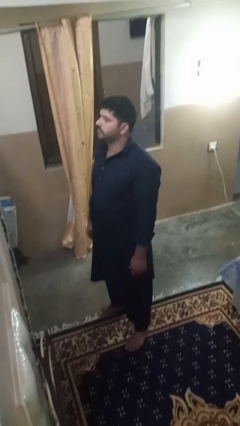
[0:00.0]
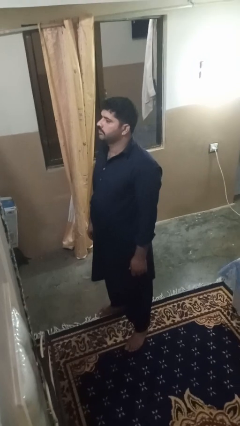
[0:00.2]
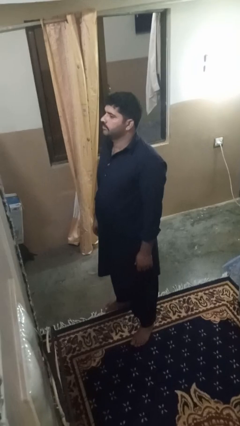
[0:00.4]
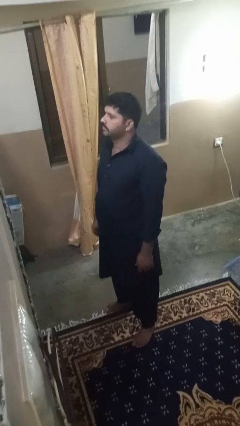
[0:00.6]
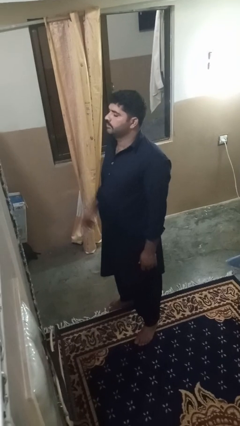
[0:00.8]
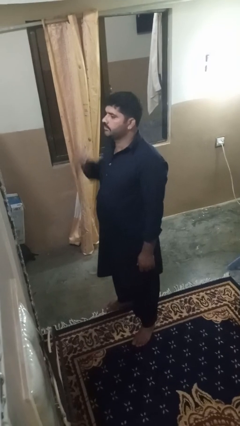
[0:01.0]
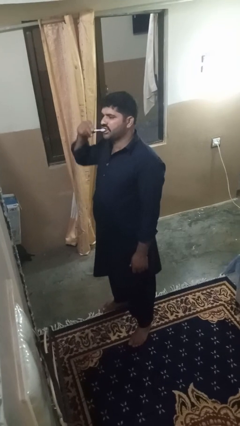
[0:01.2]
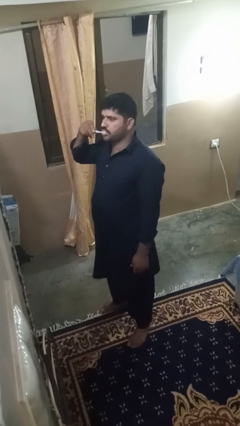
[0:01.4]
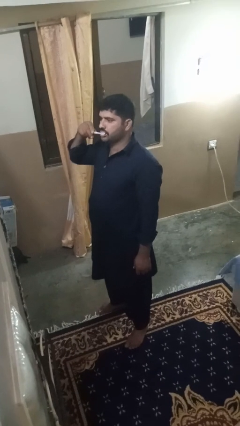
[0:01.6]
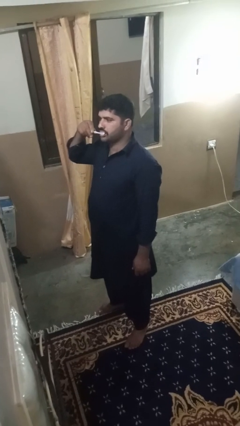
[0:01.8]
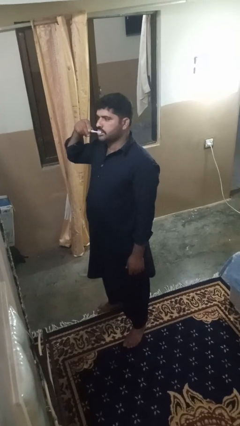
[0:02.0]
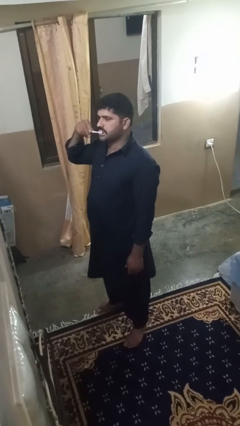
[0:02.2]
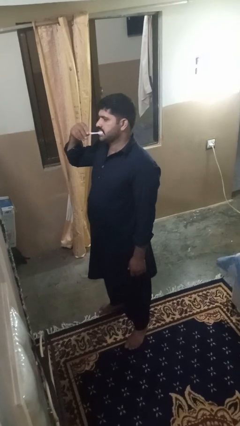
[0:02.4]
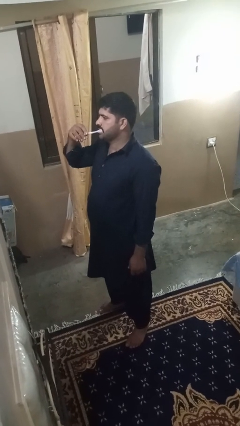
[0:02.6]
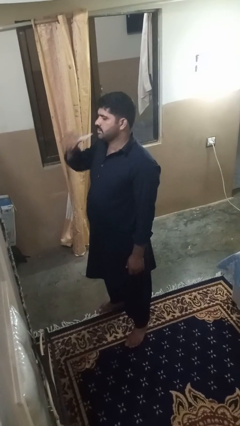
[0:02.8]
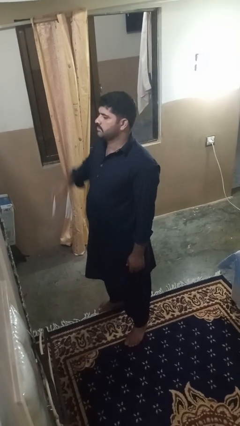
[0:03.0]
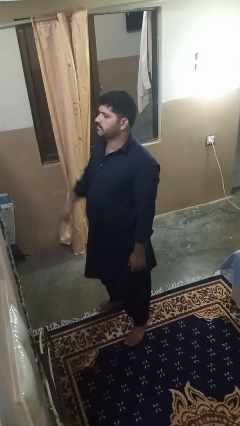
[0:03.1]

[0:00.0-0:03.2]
person brushes teeth

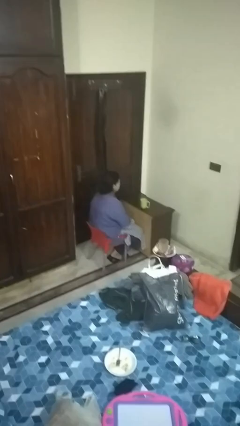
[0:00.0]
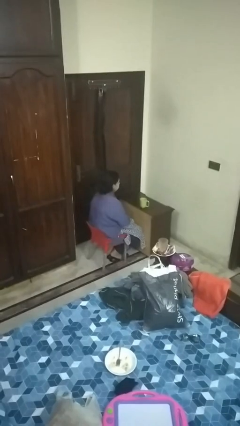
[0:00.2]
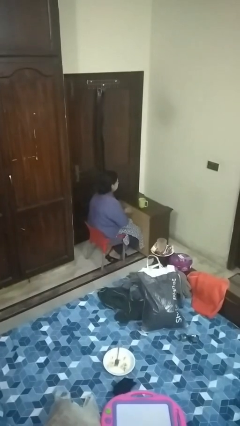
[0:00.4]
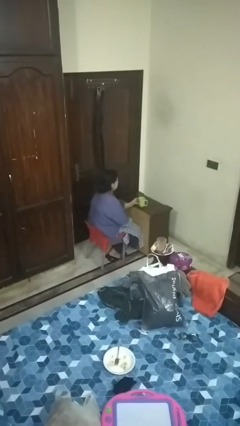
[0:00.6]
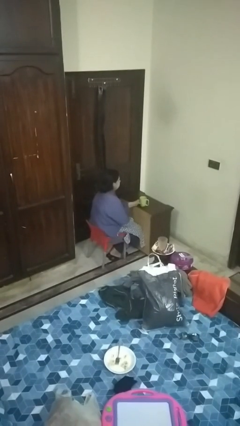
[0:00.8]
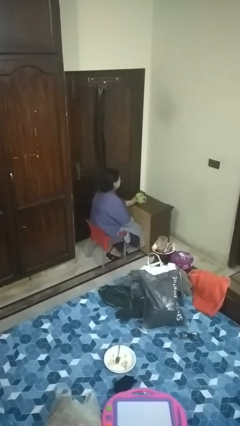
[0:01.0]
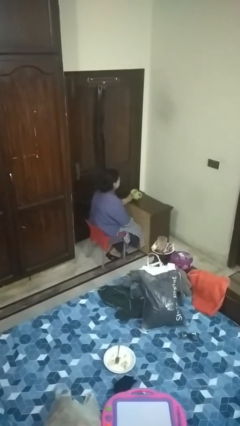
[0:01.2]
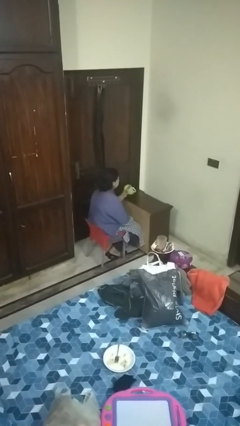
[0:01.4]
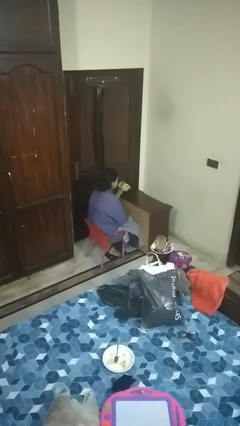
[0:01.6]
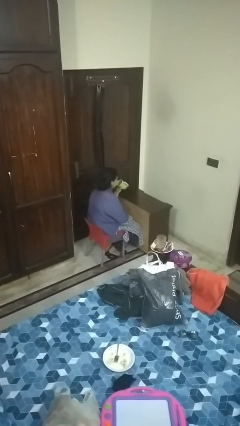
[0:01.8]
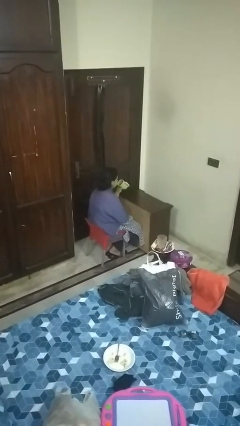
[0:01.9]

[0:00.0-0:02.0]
person picks up object from table

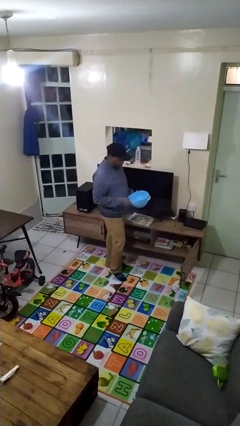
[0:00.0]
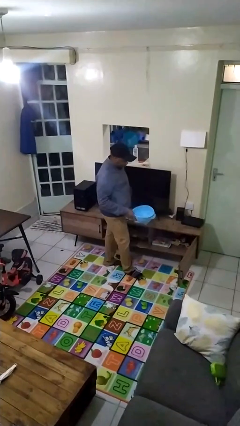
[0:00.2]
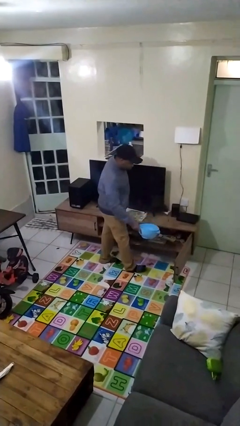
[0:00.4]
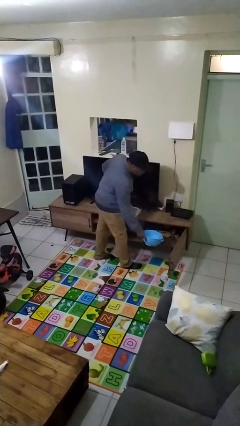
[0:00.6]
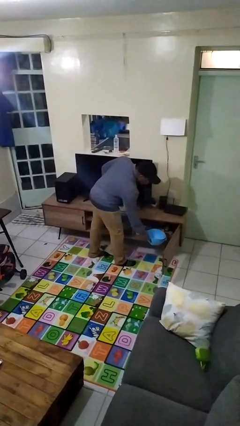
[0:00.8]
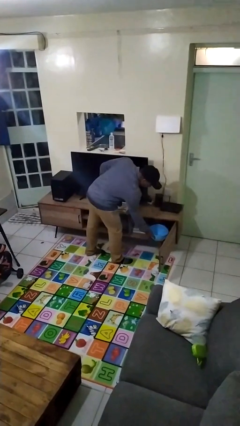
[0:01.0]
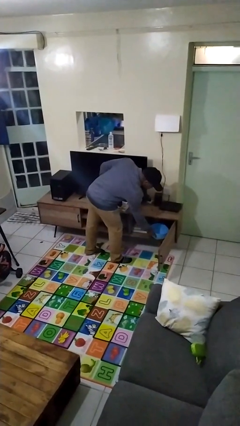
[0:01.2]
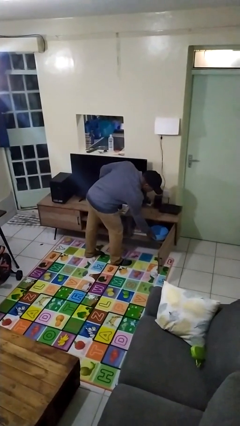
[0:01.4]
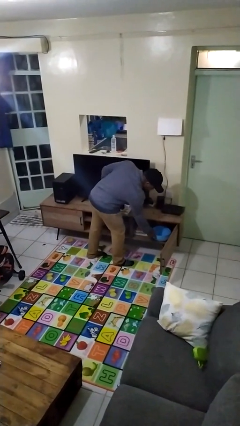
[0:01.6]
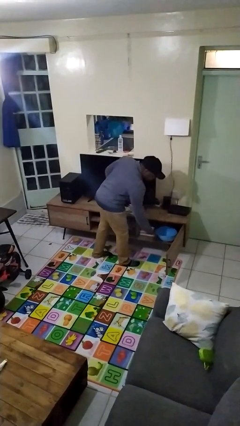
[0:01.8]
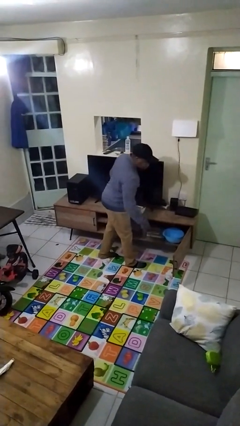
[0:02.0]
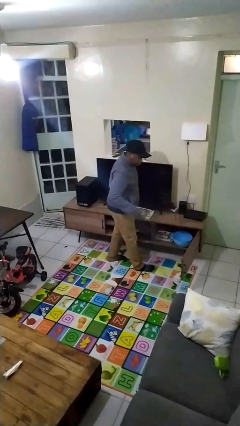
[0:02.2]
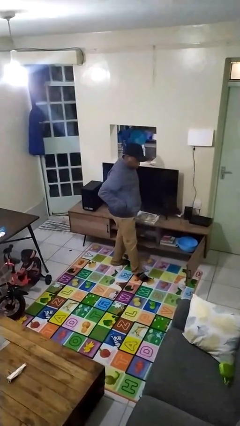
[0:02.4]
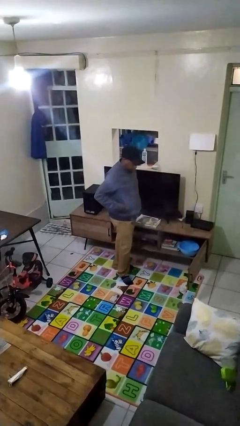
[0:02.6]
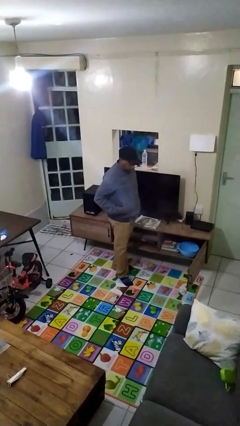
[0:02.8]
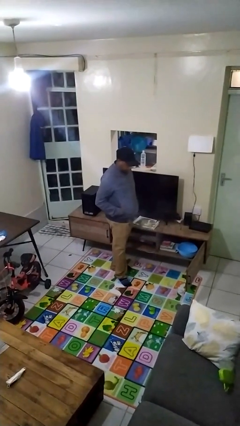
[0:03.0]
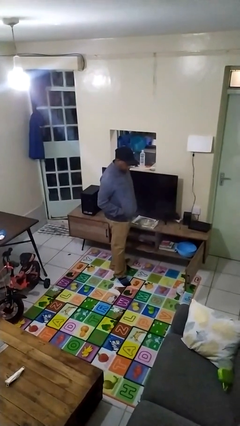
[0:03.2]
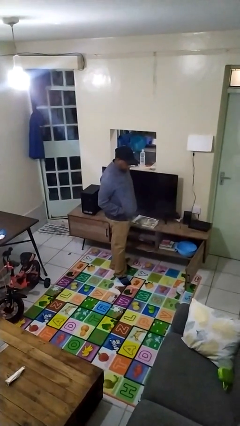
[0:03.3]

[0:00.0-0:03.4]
person puts down object into cabinet

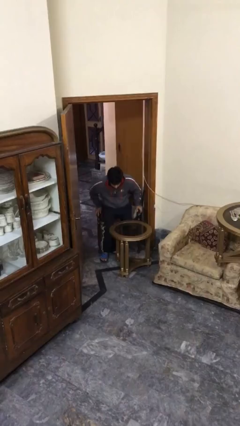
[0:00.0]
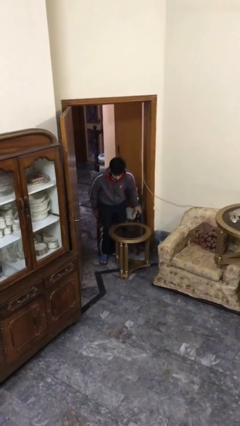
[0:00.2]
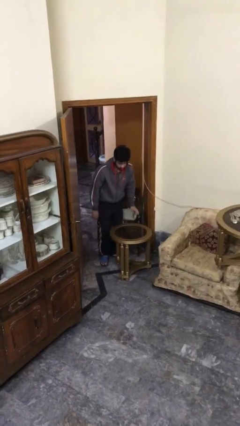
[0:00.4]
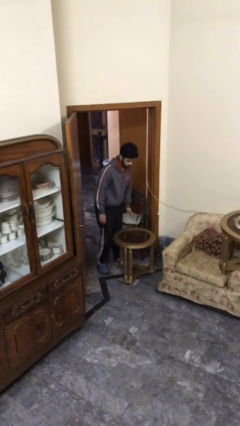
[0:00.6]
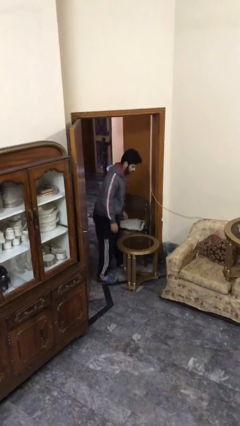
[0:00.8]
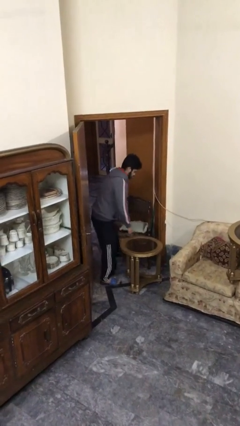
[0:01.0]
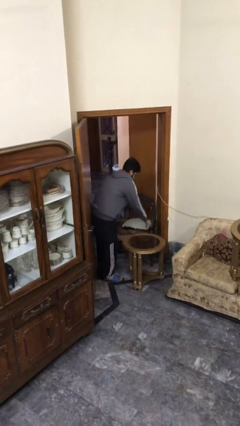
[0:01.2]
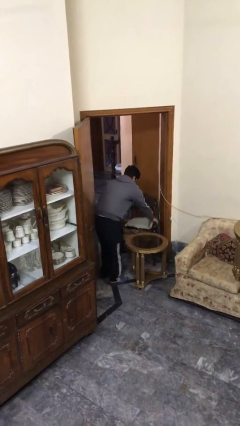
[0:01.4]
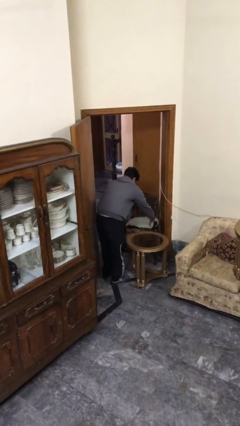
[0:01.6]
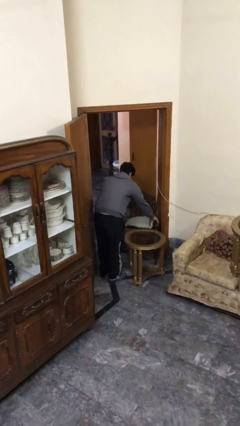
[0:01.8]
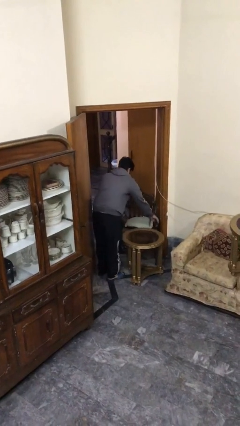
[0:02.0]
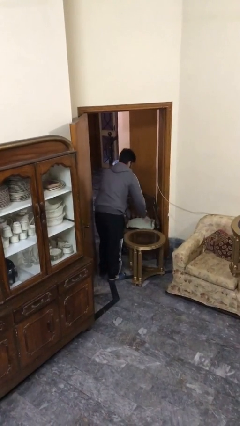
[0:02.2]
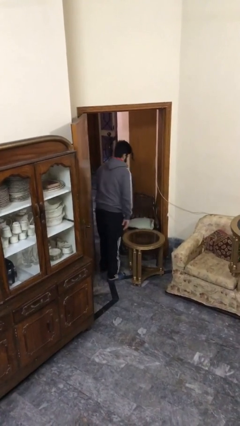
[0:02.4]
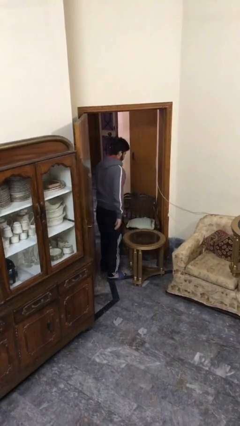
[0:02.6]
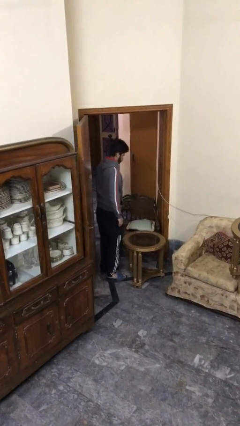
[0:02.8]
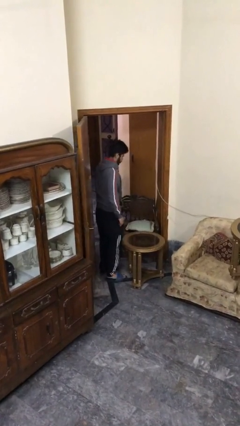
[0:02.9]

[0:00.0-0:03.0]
person stands up

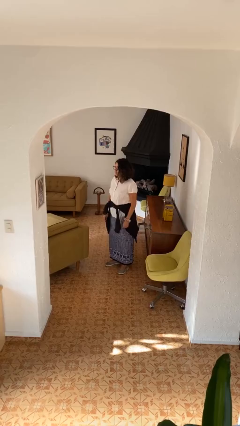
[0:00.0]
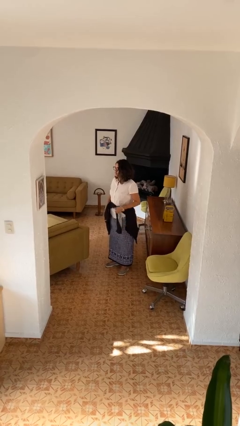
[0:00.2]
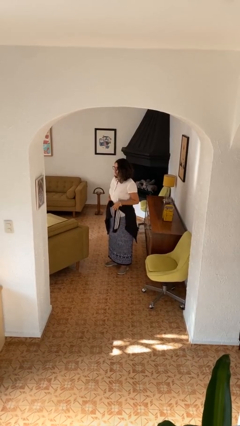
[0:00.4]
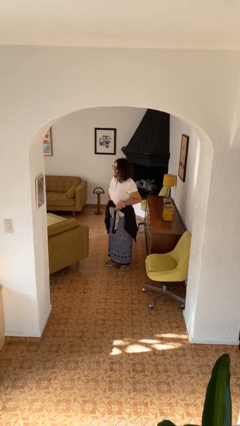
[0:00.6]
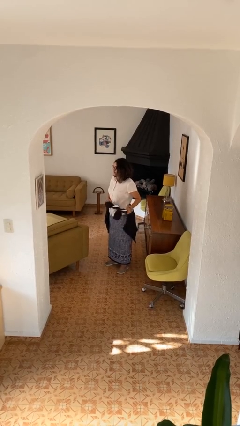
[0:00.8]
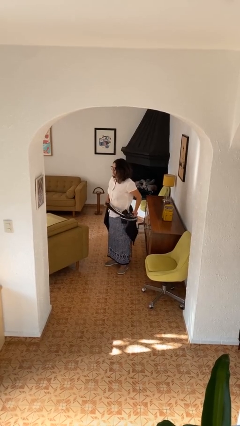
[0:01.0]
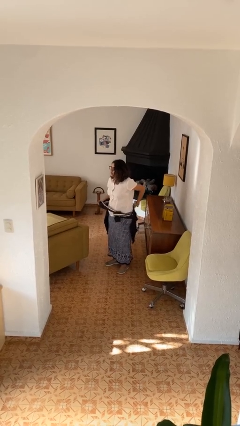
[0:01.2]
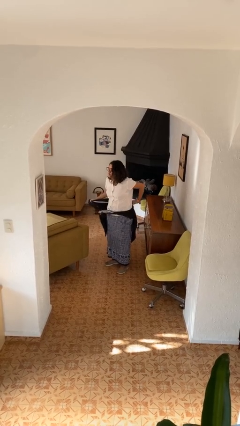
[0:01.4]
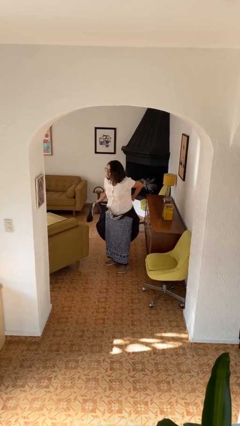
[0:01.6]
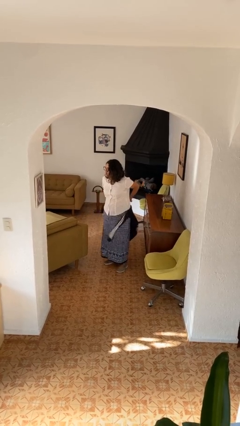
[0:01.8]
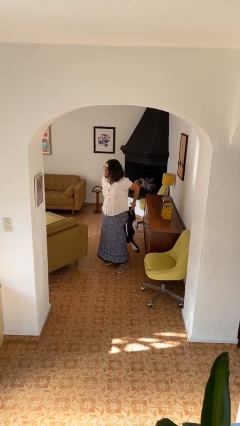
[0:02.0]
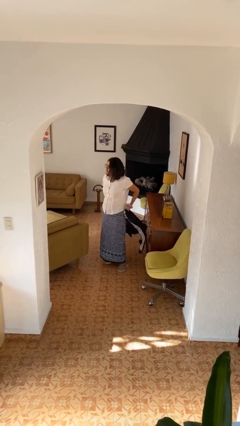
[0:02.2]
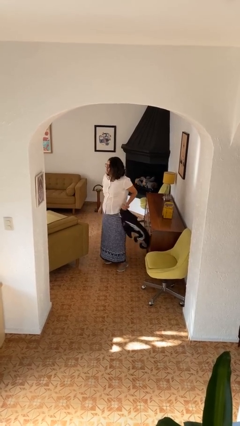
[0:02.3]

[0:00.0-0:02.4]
person unties jacket around waist

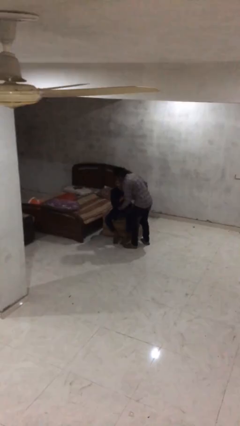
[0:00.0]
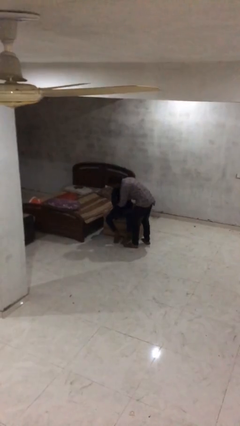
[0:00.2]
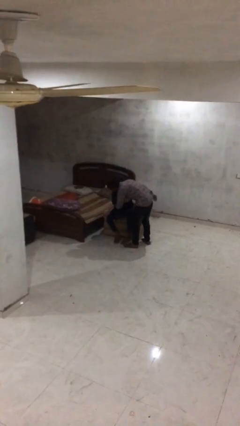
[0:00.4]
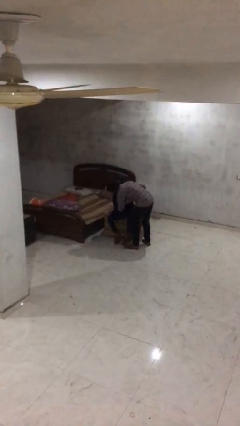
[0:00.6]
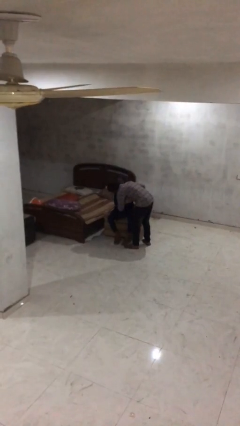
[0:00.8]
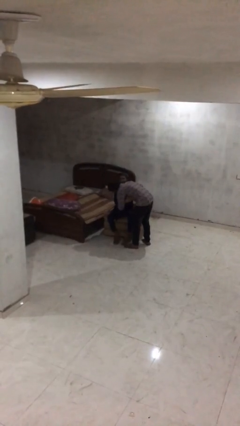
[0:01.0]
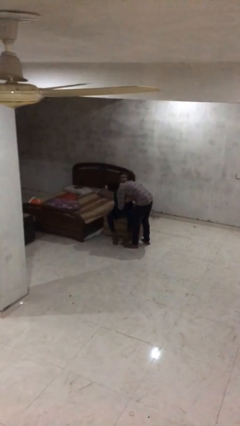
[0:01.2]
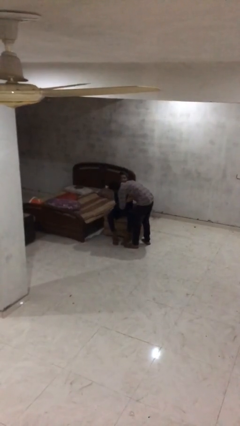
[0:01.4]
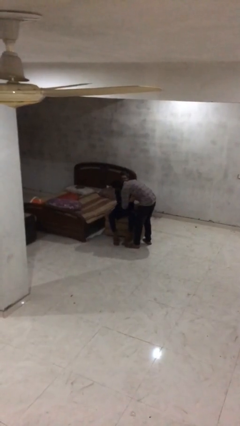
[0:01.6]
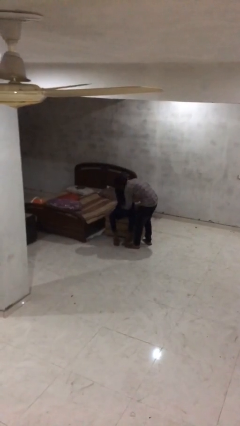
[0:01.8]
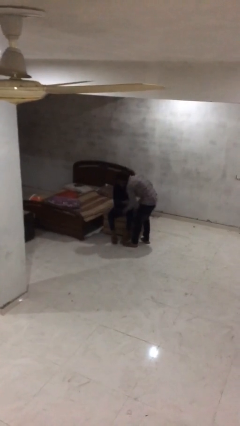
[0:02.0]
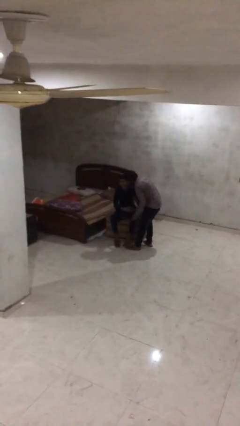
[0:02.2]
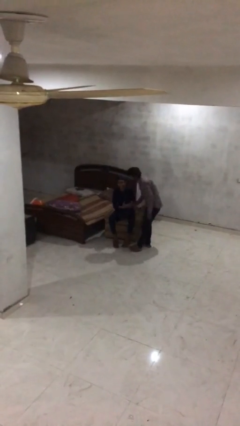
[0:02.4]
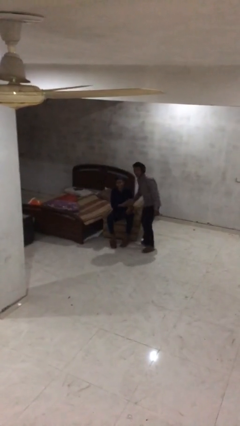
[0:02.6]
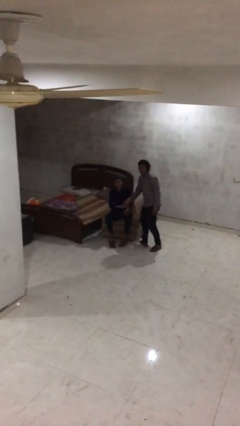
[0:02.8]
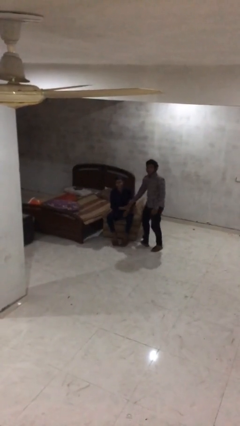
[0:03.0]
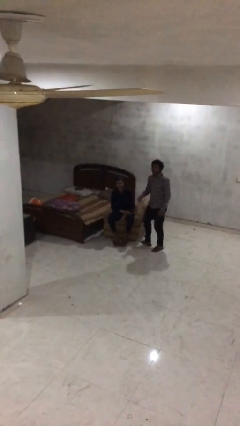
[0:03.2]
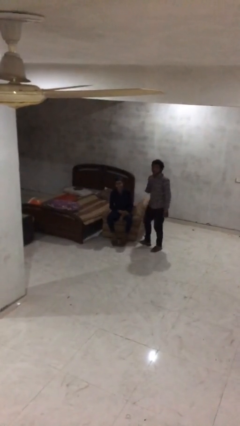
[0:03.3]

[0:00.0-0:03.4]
person embraces person
